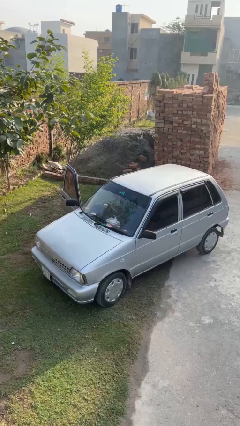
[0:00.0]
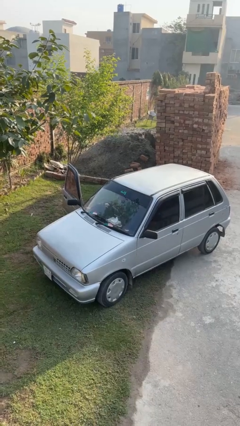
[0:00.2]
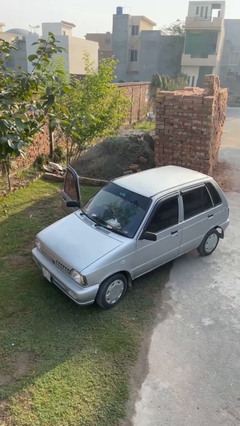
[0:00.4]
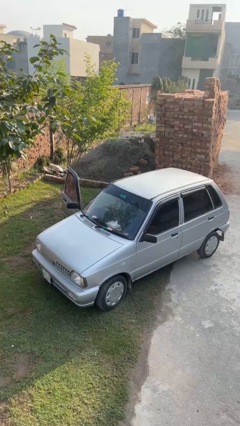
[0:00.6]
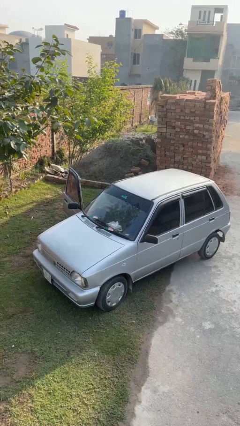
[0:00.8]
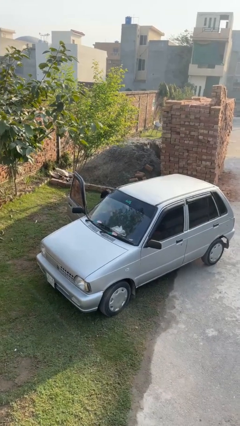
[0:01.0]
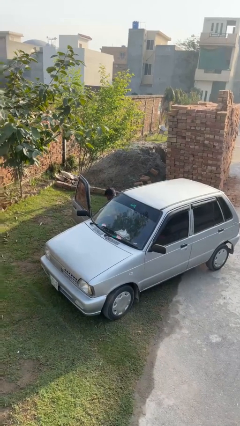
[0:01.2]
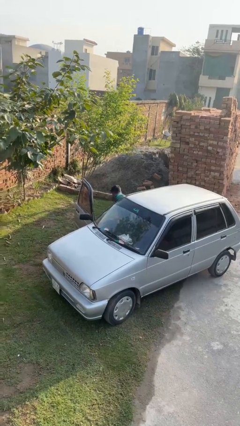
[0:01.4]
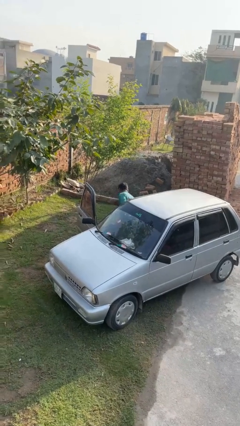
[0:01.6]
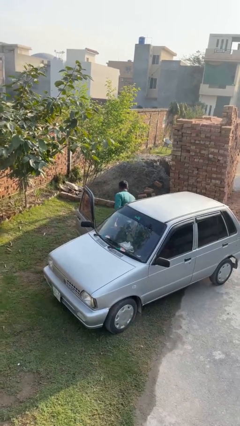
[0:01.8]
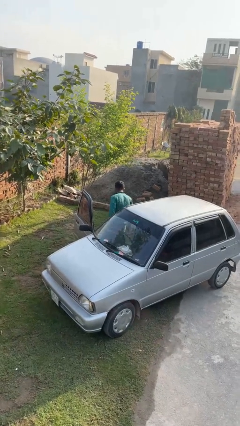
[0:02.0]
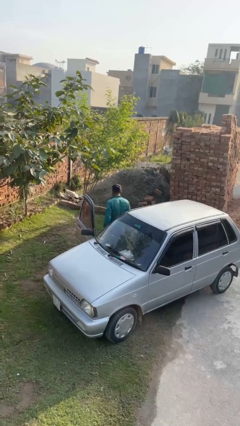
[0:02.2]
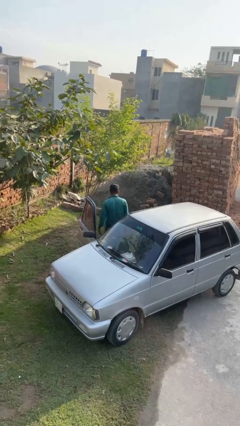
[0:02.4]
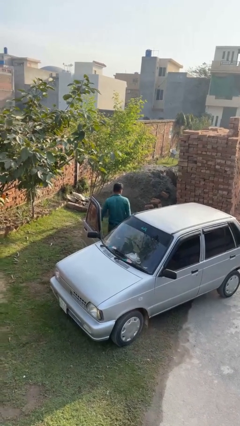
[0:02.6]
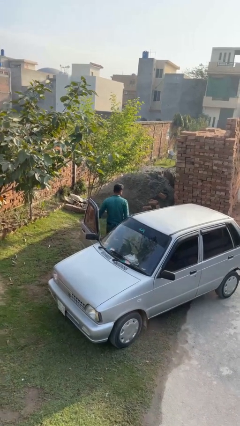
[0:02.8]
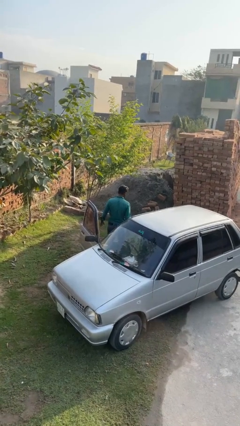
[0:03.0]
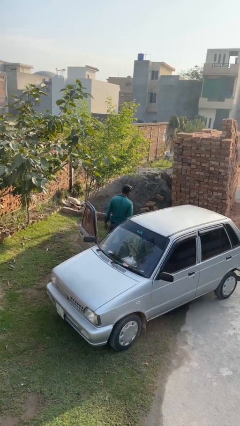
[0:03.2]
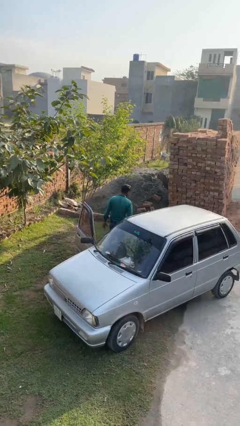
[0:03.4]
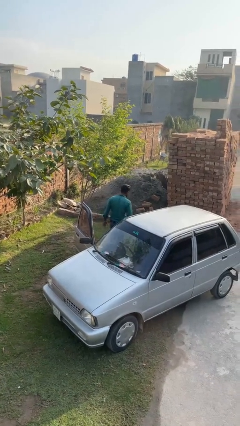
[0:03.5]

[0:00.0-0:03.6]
person exits car

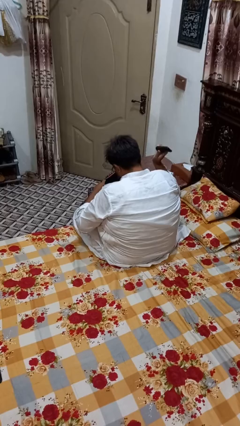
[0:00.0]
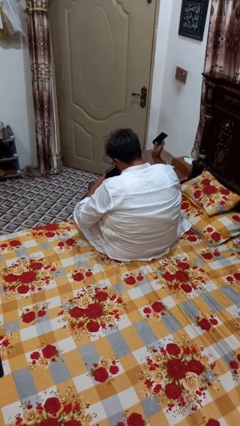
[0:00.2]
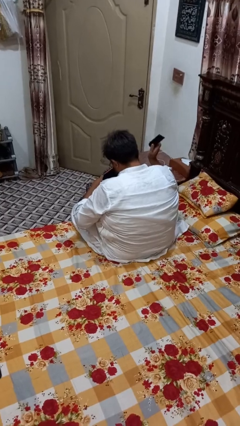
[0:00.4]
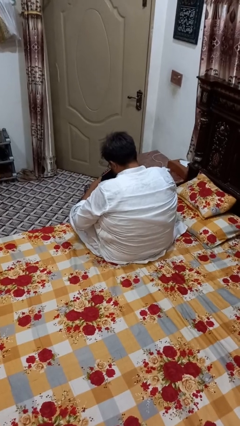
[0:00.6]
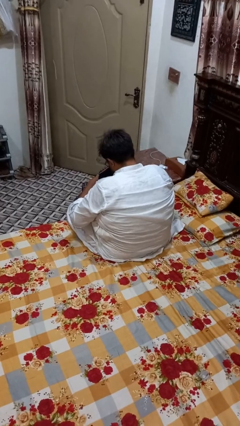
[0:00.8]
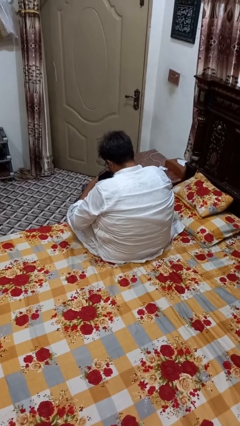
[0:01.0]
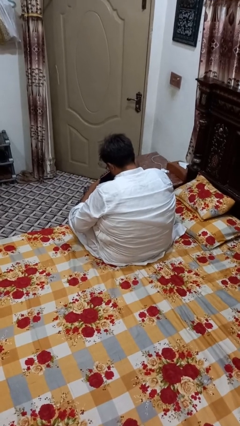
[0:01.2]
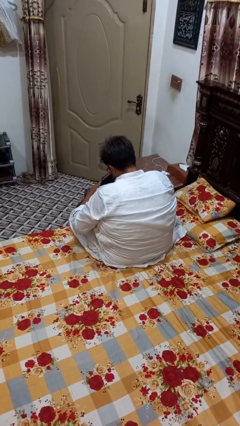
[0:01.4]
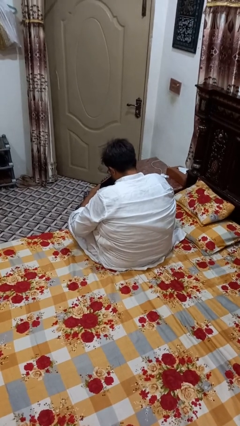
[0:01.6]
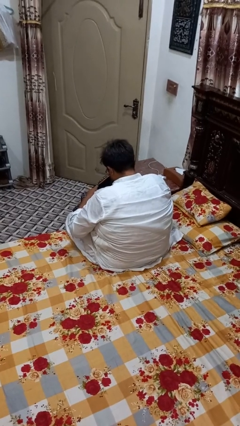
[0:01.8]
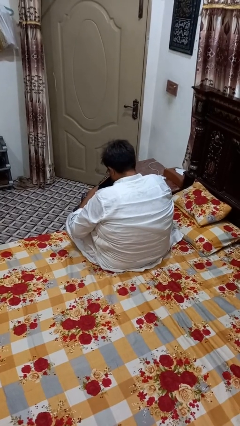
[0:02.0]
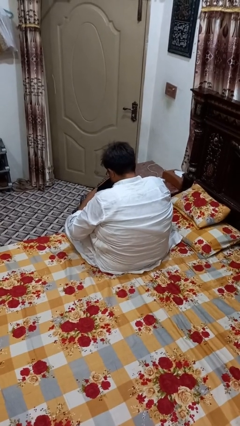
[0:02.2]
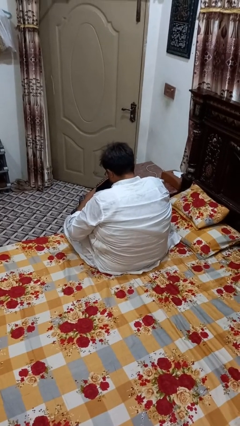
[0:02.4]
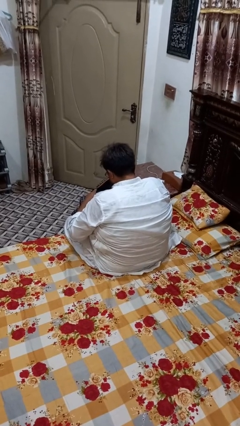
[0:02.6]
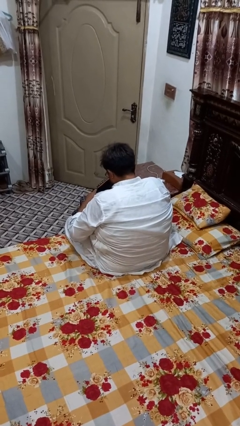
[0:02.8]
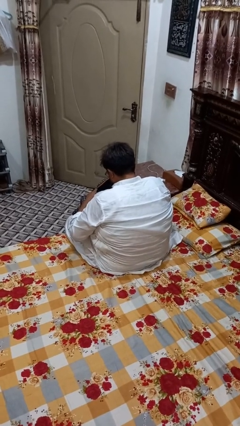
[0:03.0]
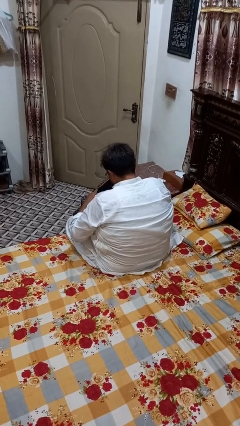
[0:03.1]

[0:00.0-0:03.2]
person puts object into bag

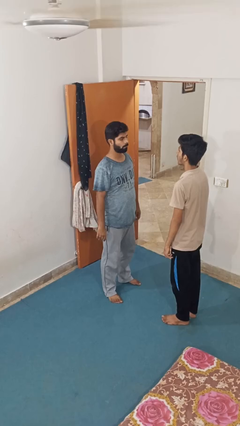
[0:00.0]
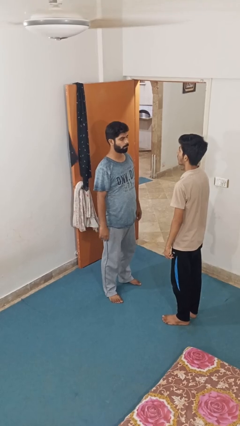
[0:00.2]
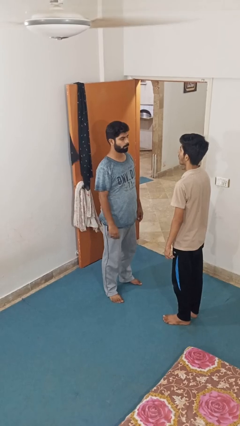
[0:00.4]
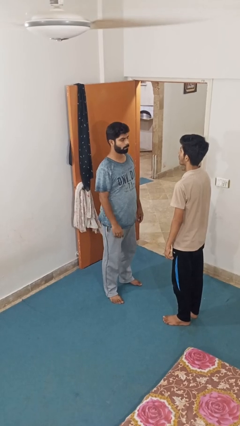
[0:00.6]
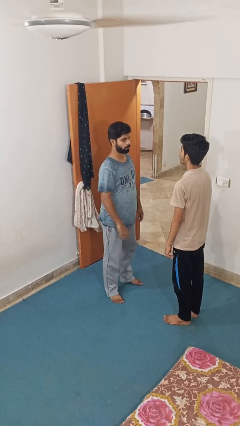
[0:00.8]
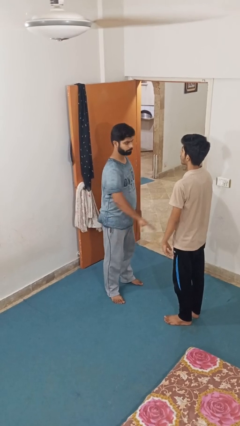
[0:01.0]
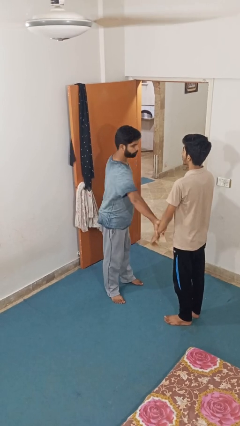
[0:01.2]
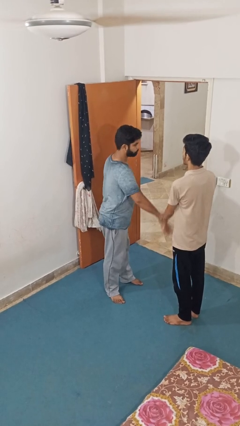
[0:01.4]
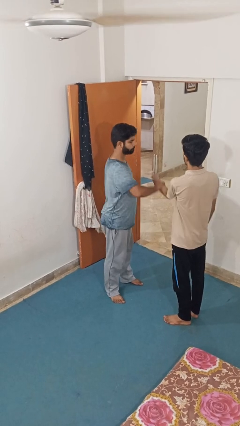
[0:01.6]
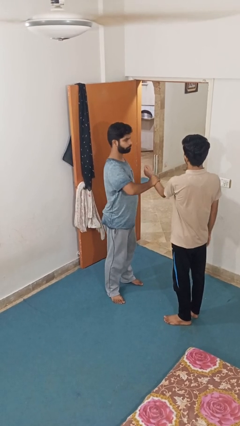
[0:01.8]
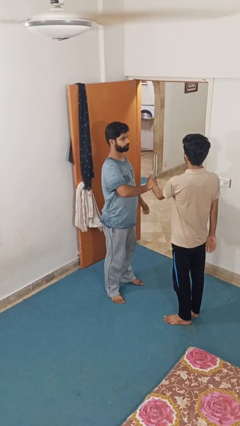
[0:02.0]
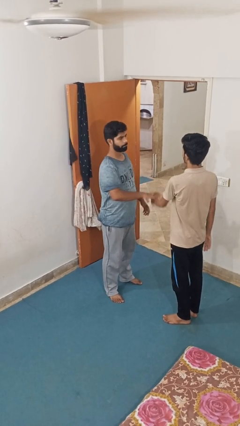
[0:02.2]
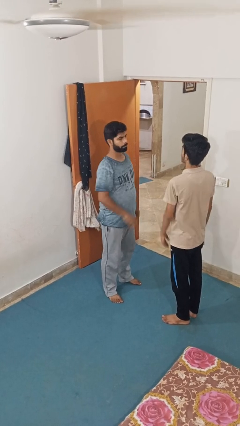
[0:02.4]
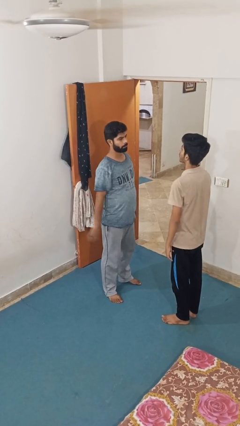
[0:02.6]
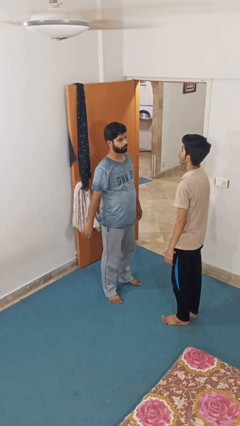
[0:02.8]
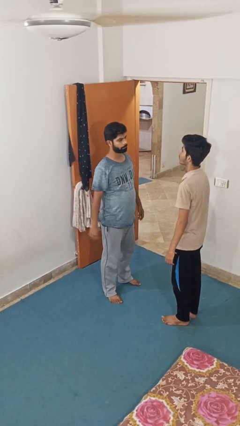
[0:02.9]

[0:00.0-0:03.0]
person grabs person by forearm

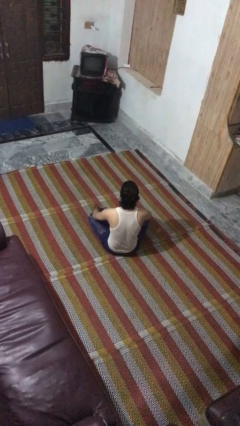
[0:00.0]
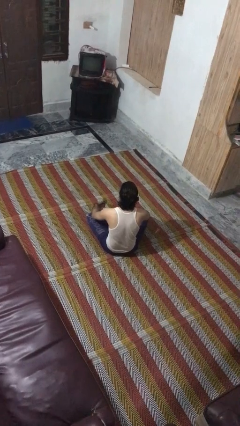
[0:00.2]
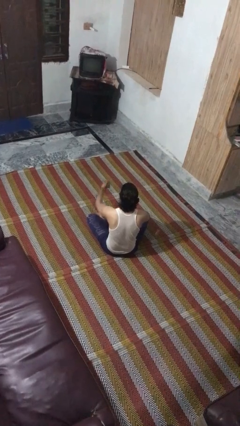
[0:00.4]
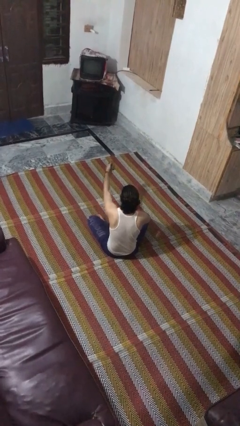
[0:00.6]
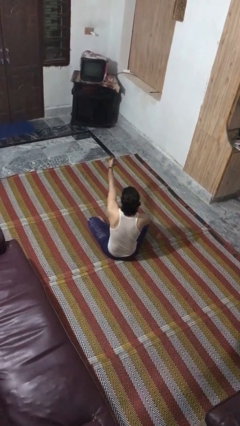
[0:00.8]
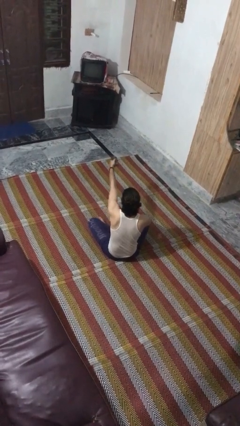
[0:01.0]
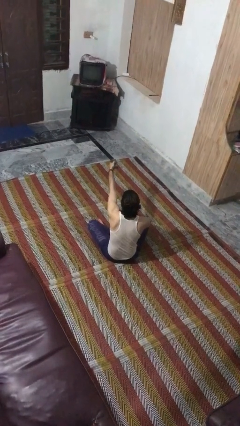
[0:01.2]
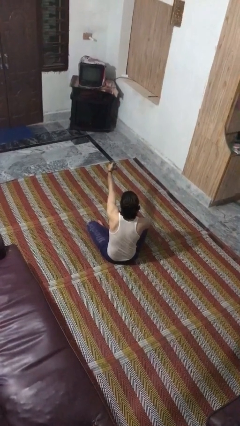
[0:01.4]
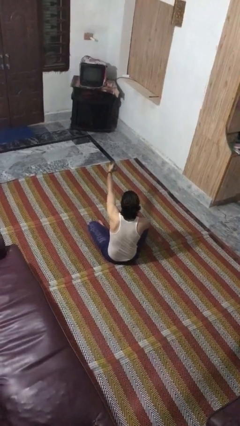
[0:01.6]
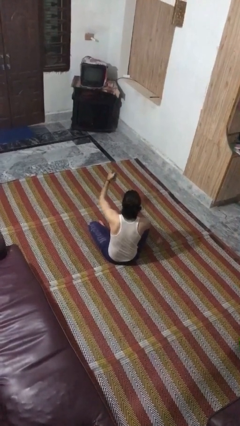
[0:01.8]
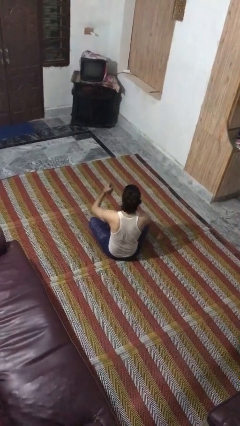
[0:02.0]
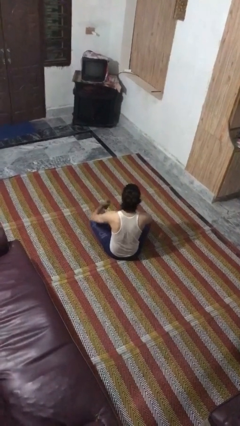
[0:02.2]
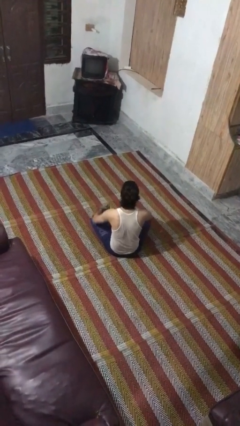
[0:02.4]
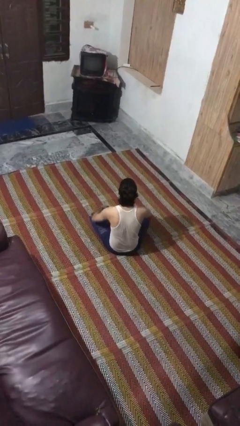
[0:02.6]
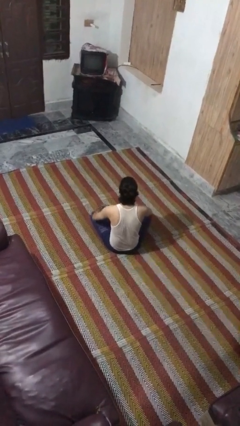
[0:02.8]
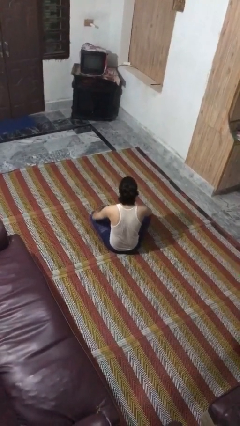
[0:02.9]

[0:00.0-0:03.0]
person uses television remote

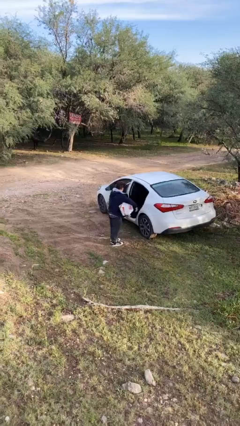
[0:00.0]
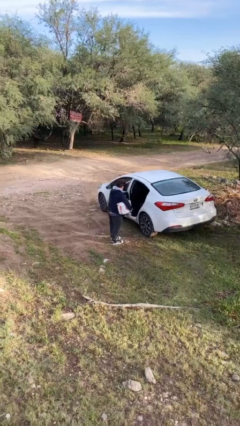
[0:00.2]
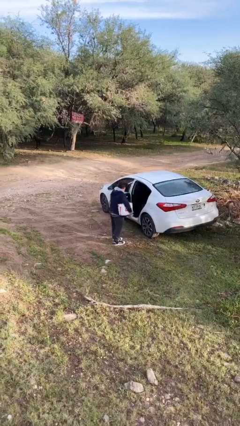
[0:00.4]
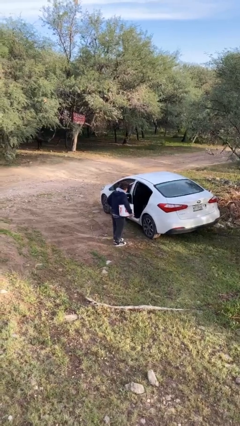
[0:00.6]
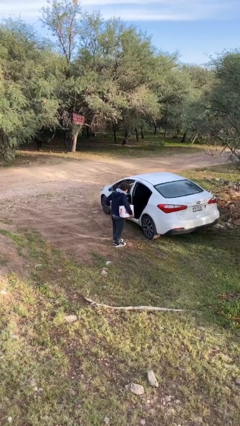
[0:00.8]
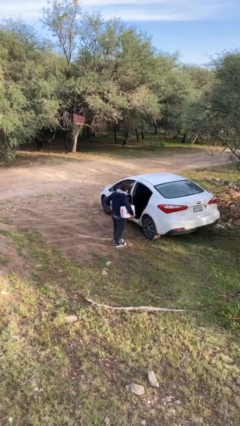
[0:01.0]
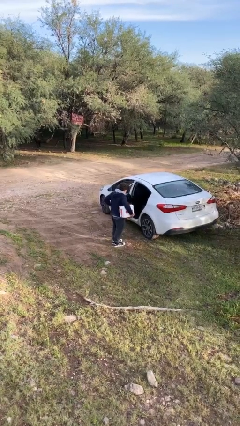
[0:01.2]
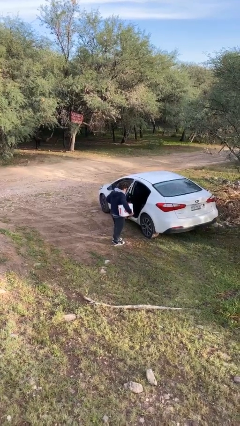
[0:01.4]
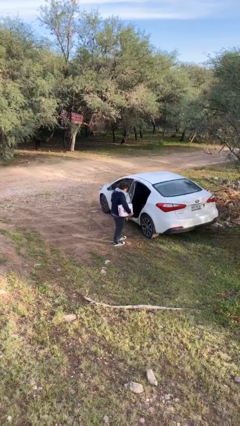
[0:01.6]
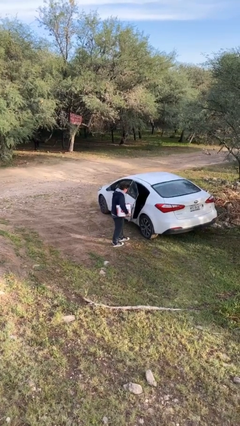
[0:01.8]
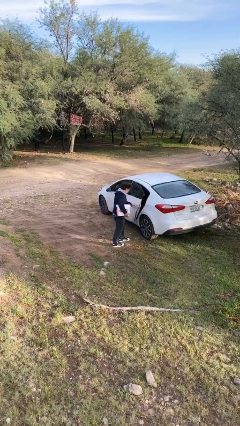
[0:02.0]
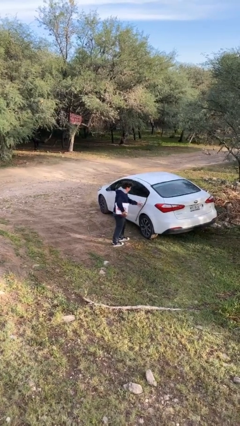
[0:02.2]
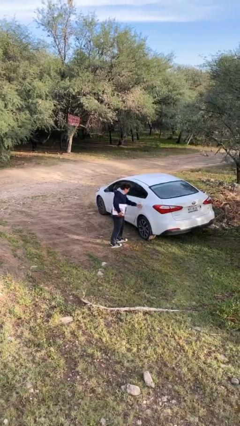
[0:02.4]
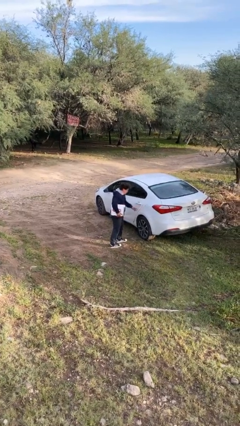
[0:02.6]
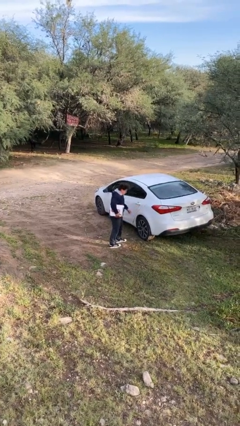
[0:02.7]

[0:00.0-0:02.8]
person closes car door

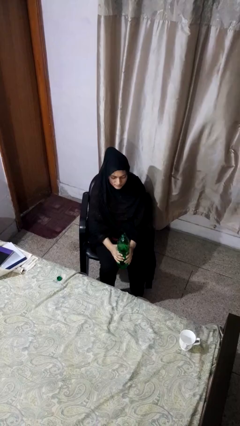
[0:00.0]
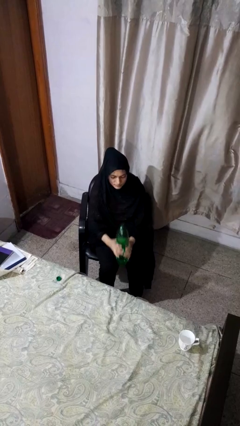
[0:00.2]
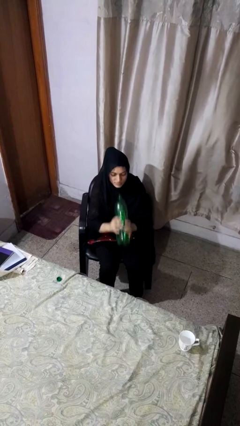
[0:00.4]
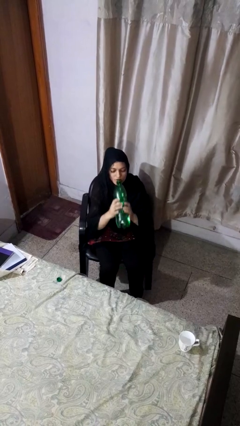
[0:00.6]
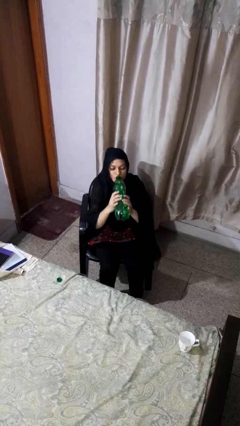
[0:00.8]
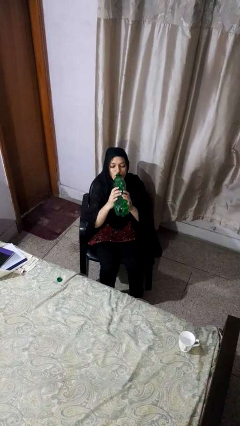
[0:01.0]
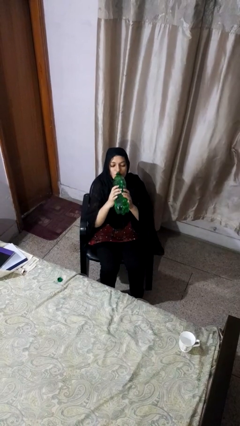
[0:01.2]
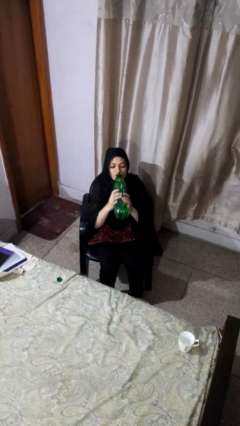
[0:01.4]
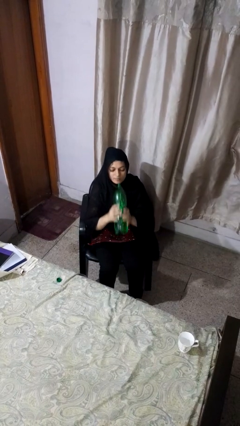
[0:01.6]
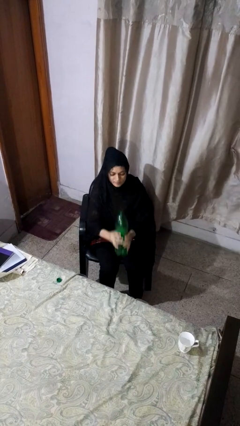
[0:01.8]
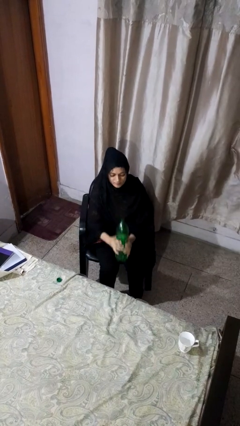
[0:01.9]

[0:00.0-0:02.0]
person drinks from bottle

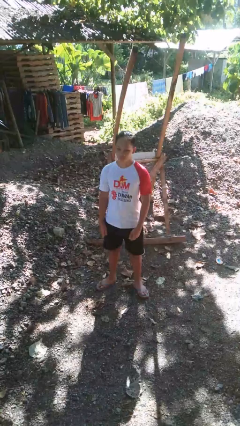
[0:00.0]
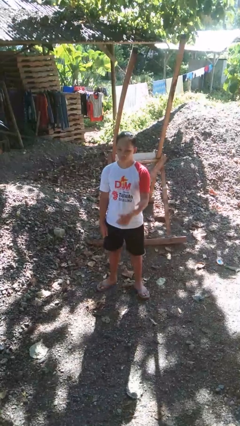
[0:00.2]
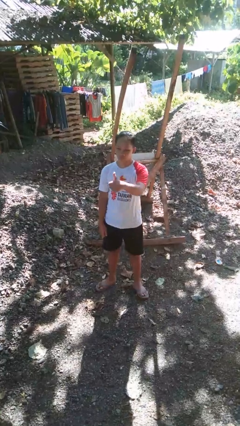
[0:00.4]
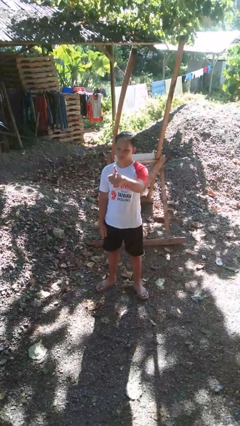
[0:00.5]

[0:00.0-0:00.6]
person gestures thumbs up
